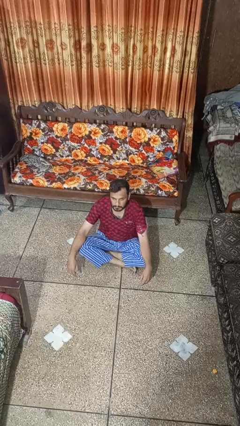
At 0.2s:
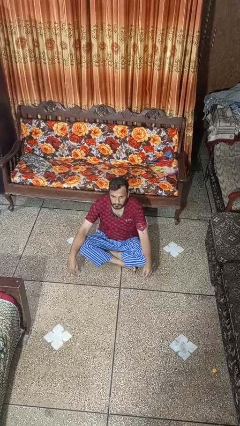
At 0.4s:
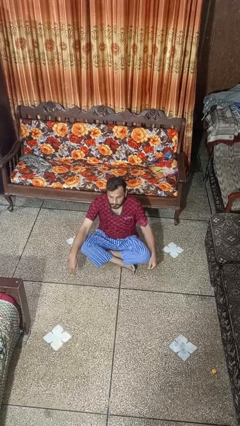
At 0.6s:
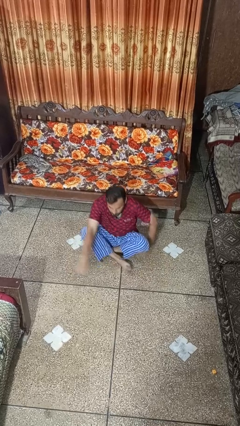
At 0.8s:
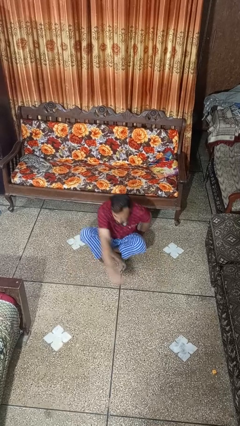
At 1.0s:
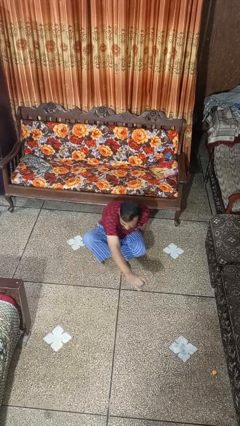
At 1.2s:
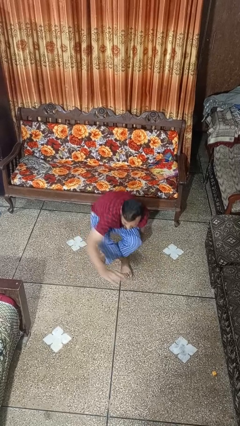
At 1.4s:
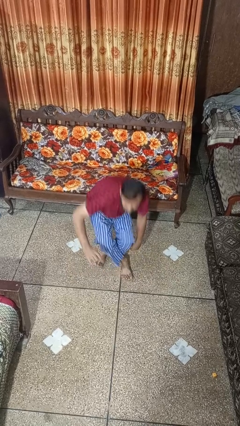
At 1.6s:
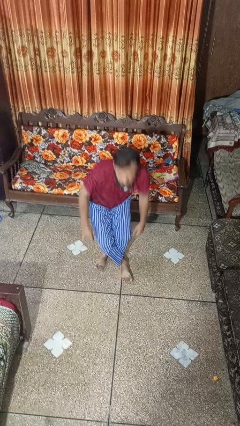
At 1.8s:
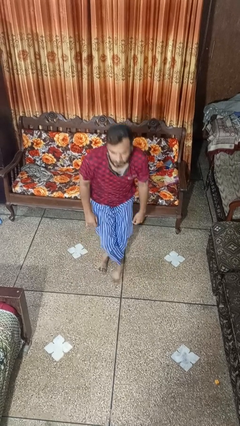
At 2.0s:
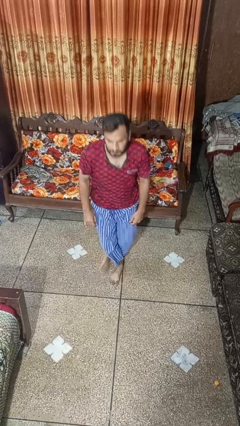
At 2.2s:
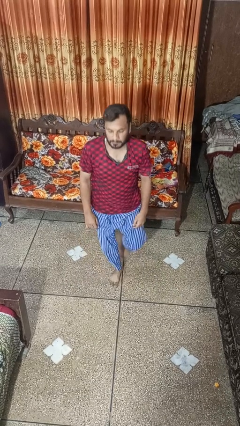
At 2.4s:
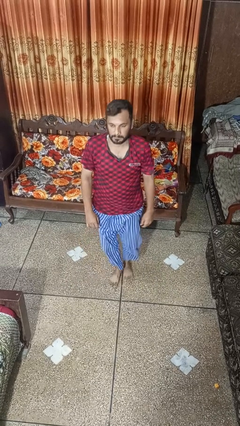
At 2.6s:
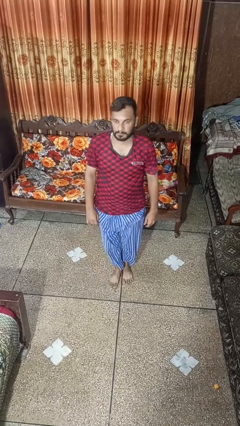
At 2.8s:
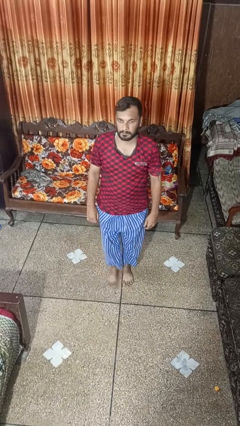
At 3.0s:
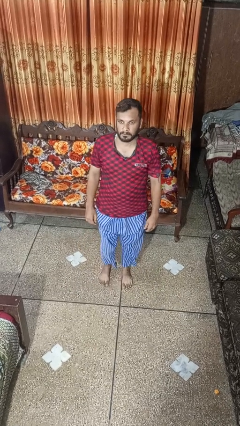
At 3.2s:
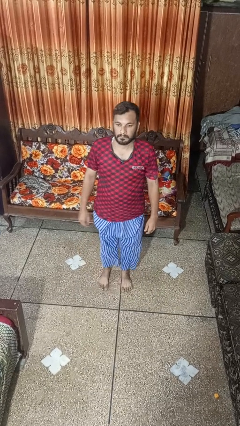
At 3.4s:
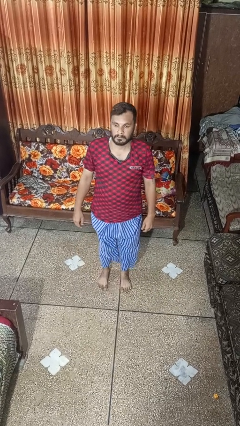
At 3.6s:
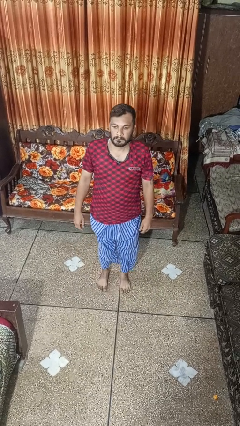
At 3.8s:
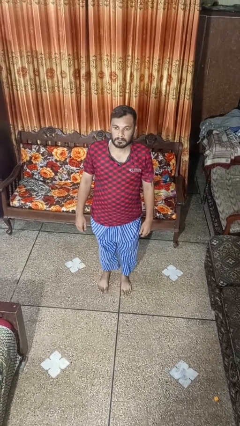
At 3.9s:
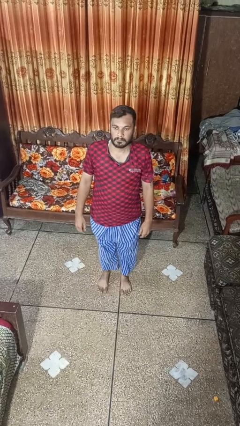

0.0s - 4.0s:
person stands up from floor

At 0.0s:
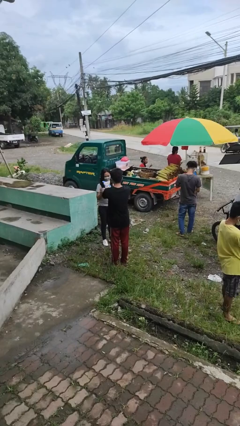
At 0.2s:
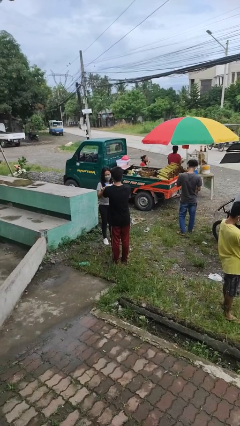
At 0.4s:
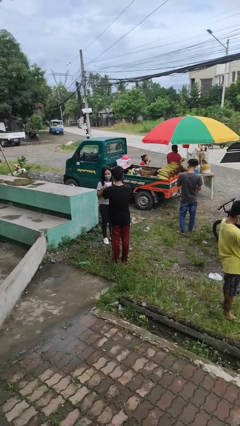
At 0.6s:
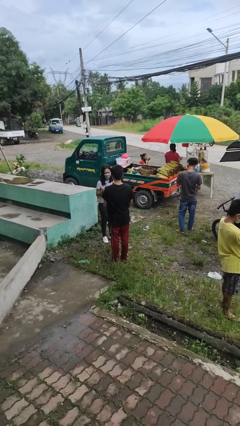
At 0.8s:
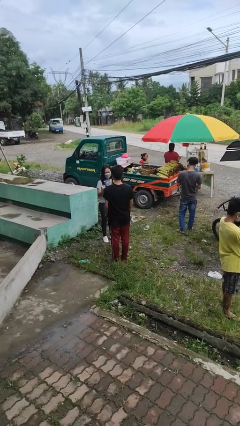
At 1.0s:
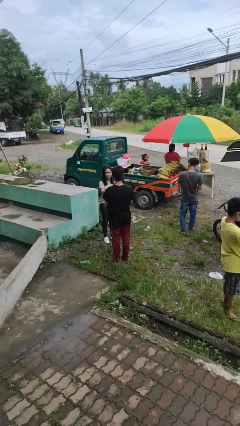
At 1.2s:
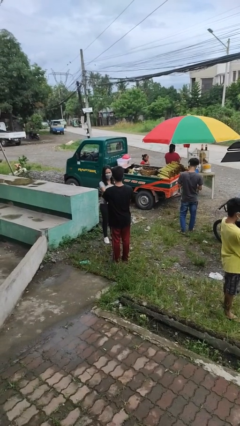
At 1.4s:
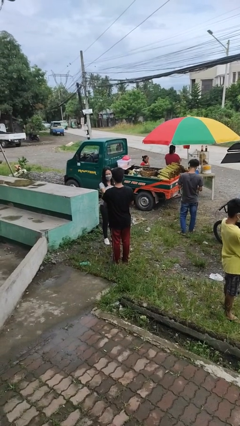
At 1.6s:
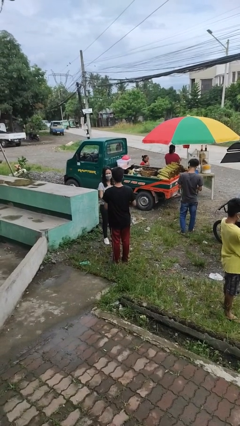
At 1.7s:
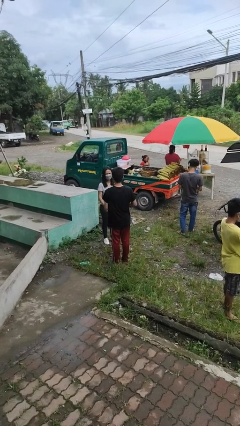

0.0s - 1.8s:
person transfers object to person

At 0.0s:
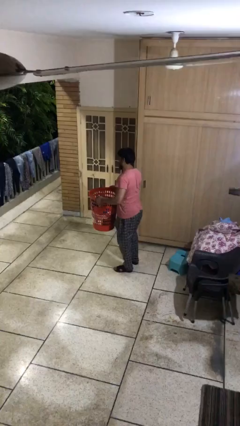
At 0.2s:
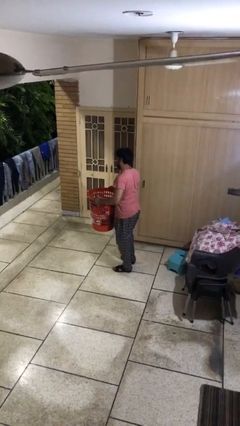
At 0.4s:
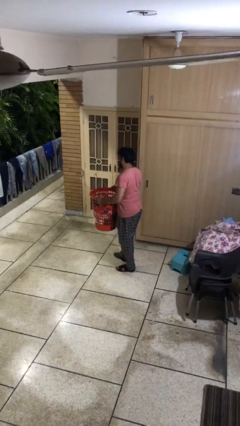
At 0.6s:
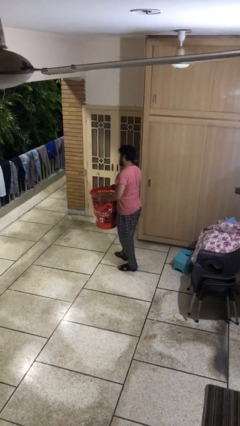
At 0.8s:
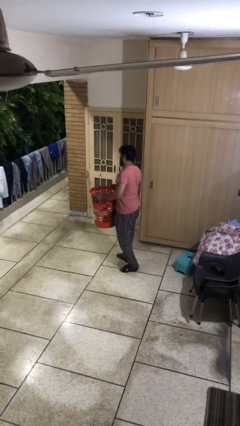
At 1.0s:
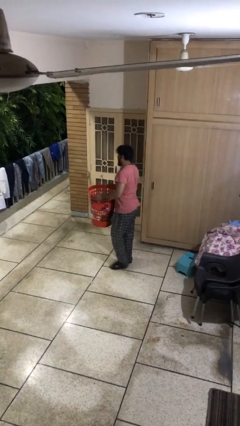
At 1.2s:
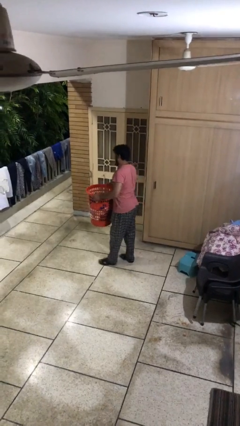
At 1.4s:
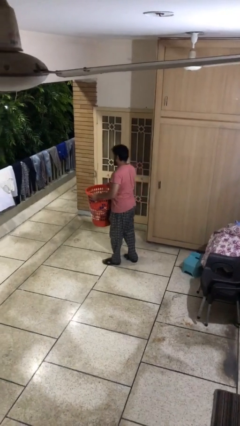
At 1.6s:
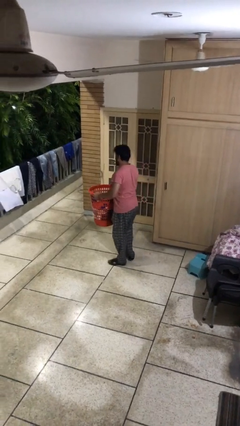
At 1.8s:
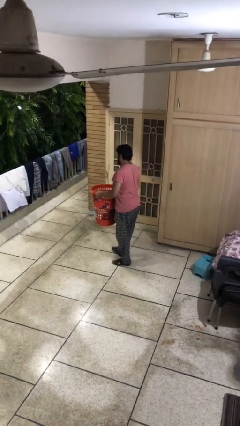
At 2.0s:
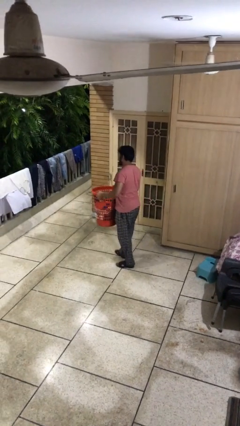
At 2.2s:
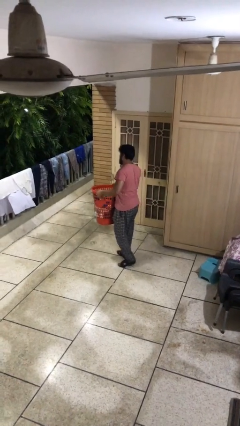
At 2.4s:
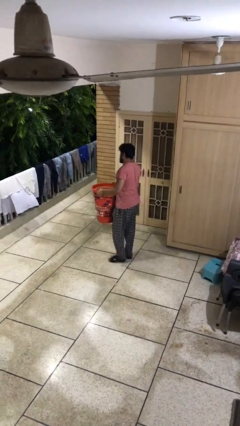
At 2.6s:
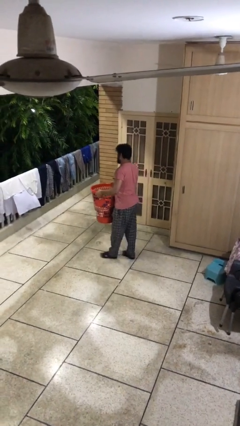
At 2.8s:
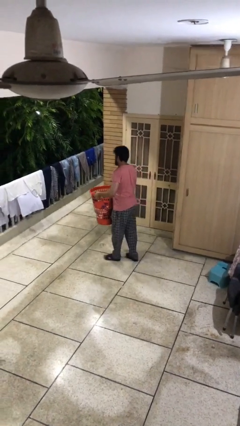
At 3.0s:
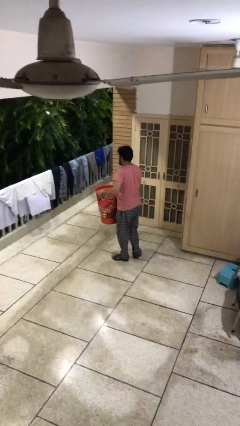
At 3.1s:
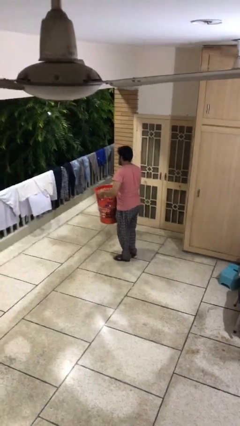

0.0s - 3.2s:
person carries heavy object

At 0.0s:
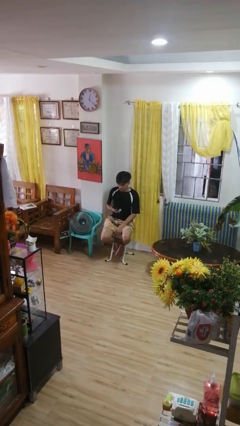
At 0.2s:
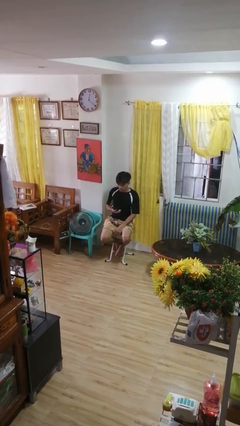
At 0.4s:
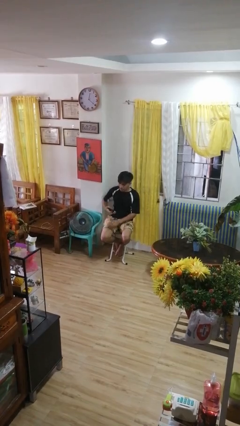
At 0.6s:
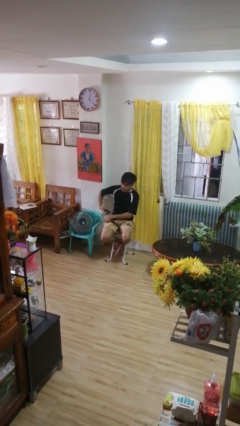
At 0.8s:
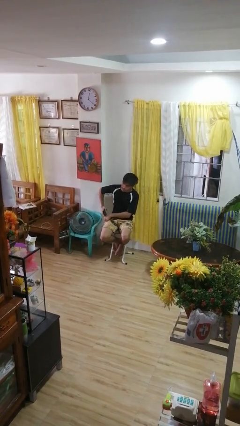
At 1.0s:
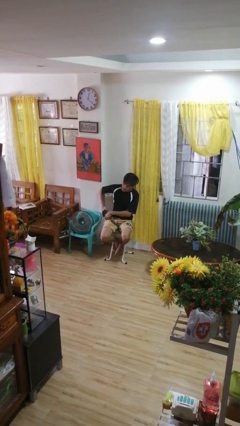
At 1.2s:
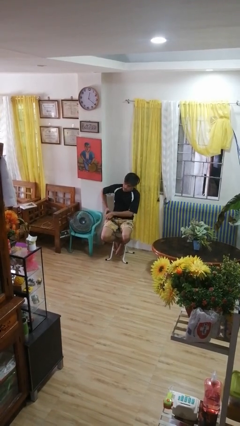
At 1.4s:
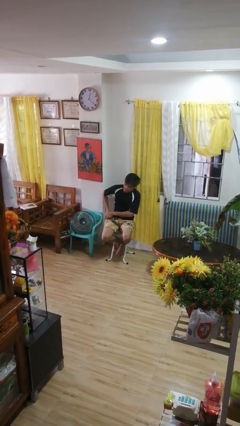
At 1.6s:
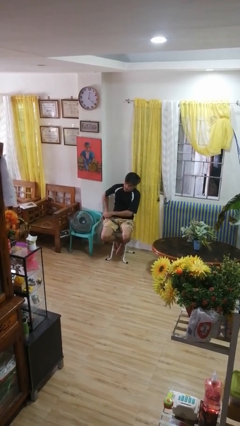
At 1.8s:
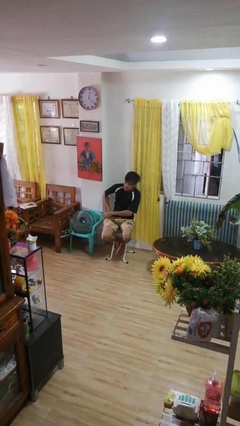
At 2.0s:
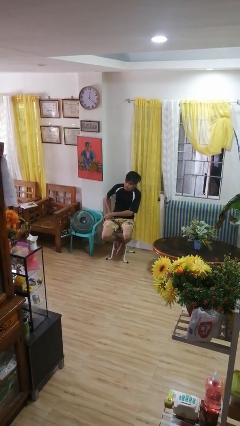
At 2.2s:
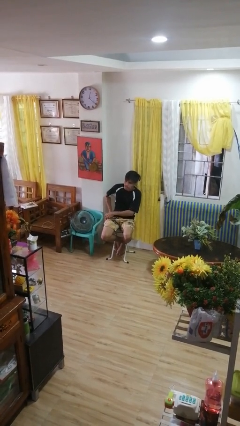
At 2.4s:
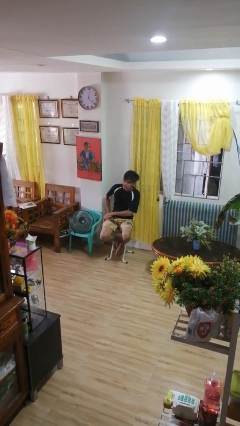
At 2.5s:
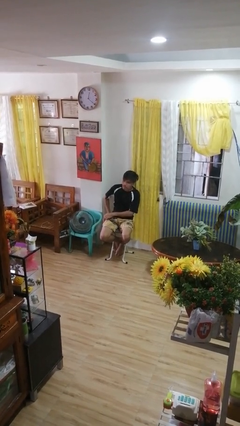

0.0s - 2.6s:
person puts phone into pocket

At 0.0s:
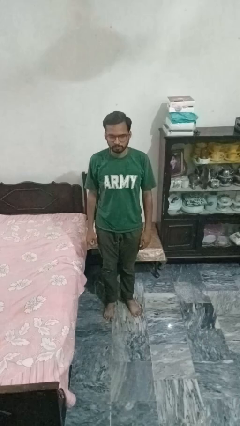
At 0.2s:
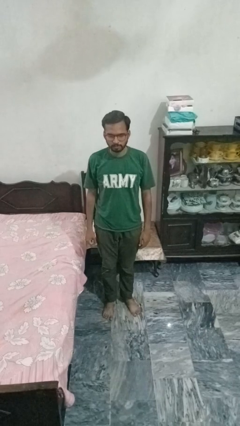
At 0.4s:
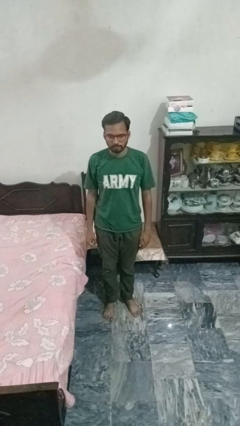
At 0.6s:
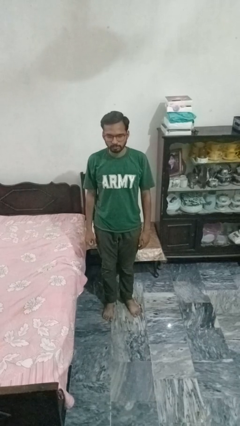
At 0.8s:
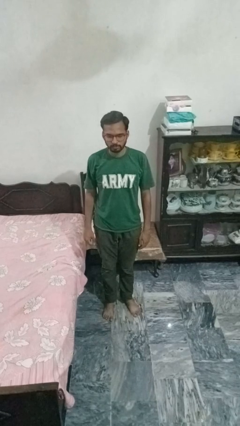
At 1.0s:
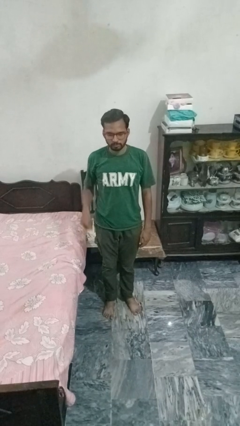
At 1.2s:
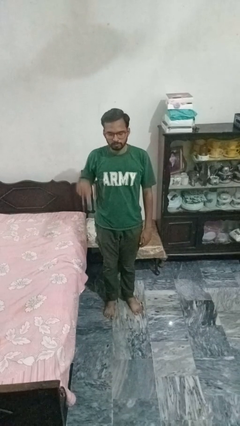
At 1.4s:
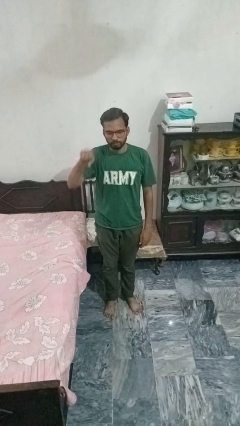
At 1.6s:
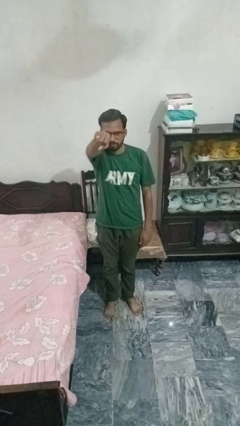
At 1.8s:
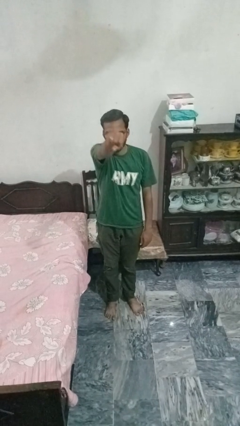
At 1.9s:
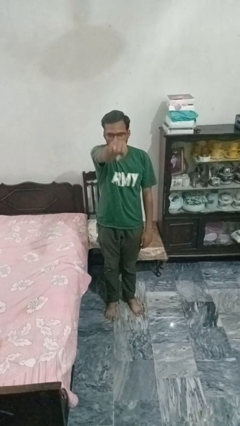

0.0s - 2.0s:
person punches

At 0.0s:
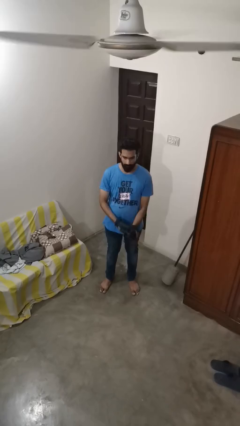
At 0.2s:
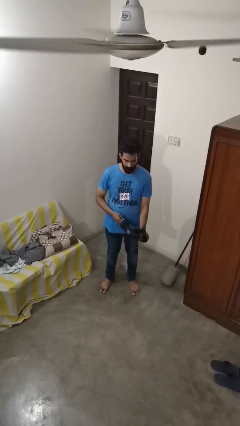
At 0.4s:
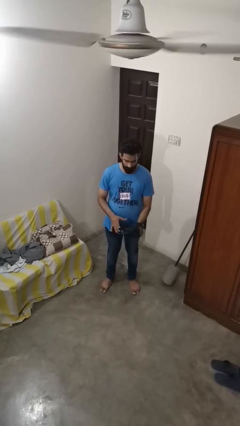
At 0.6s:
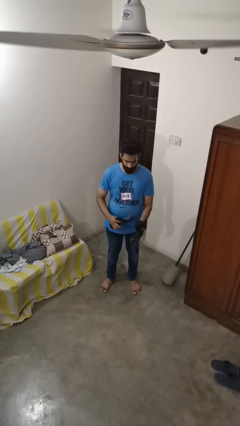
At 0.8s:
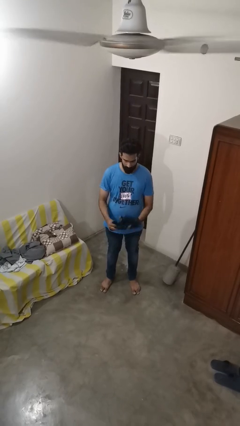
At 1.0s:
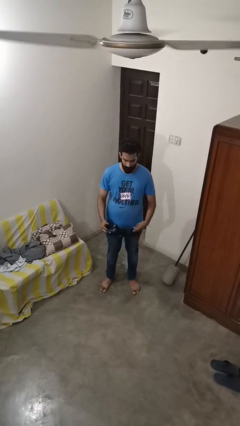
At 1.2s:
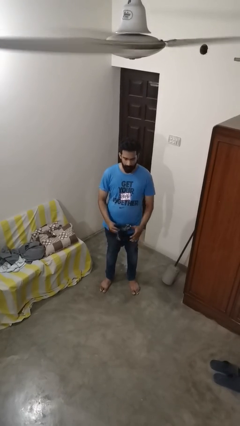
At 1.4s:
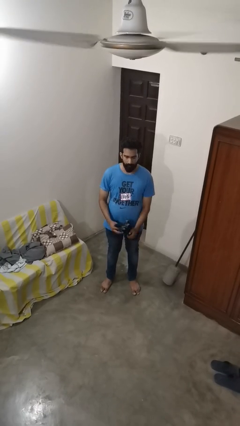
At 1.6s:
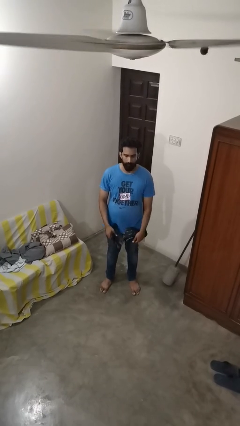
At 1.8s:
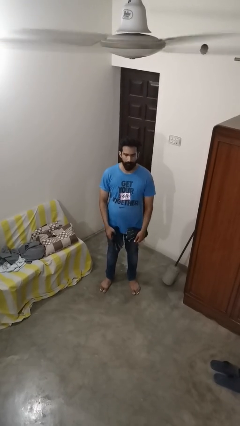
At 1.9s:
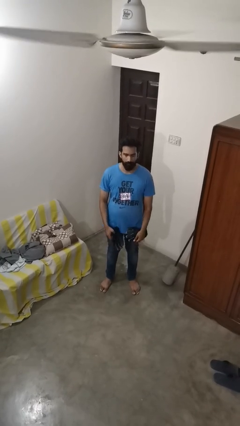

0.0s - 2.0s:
person takes off gloves

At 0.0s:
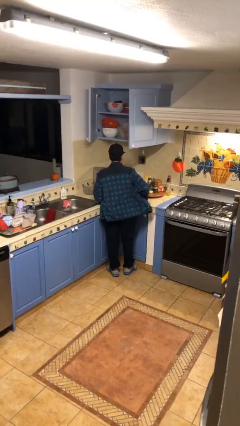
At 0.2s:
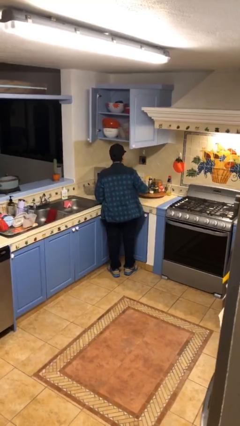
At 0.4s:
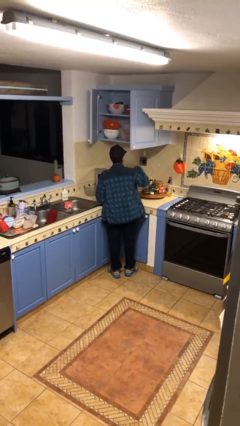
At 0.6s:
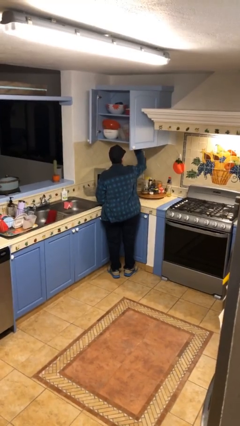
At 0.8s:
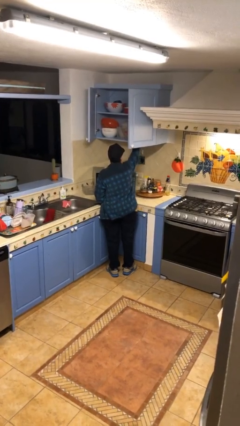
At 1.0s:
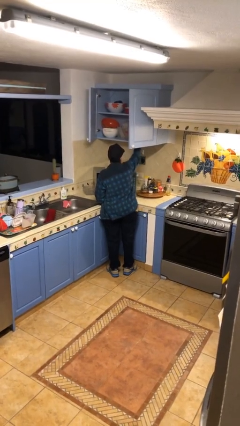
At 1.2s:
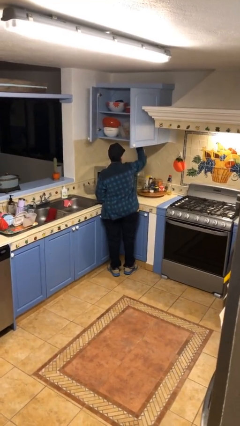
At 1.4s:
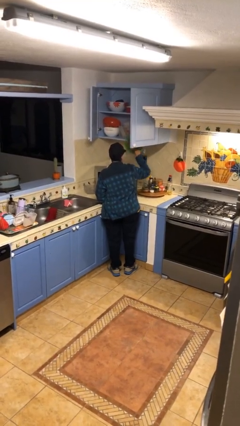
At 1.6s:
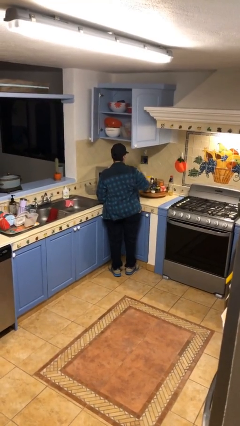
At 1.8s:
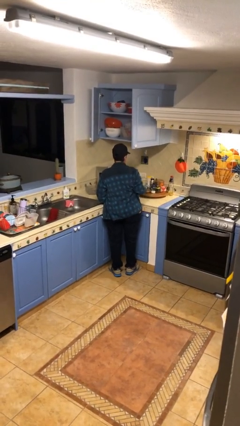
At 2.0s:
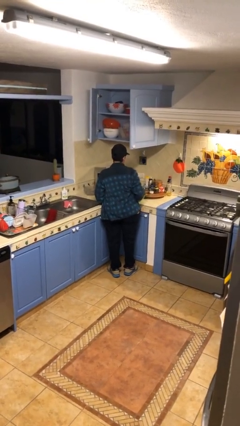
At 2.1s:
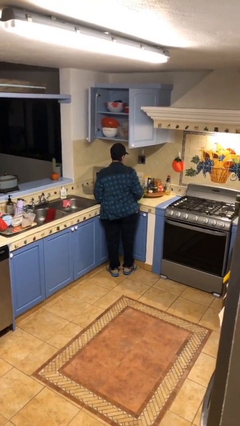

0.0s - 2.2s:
person takes object from cabinet
